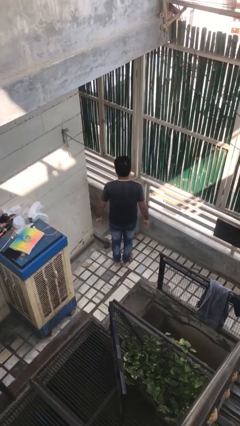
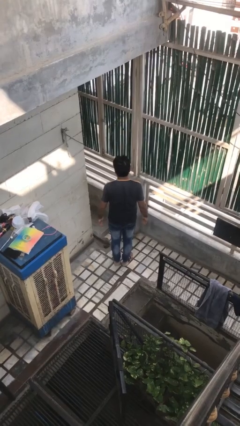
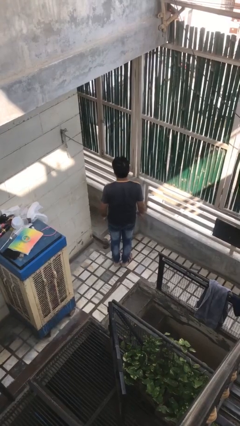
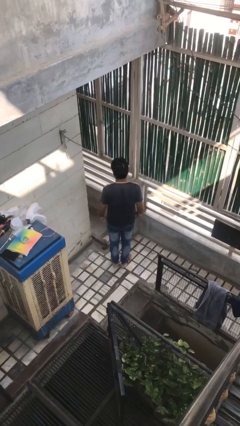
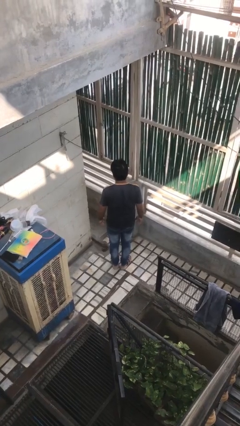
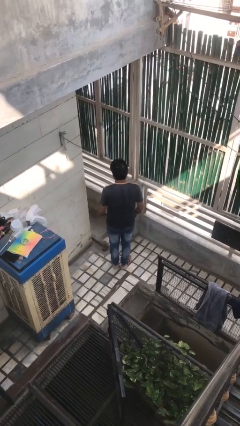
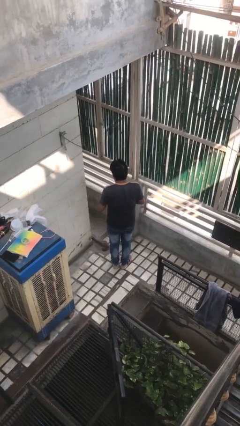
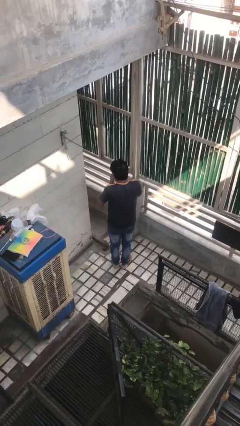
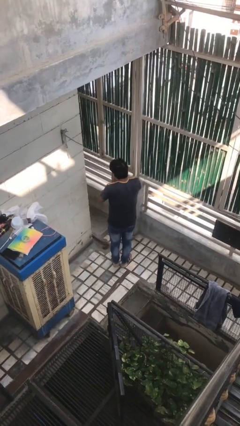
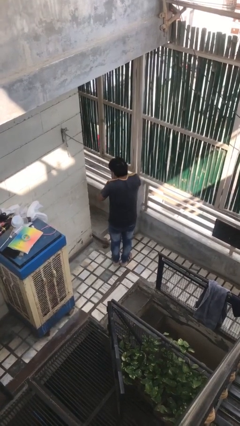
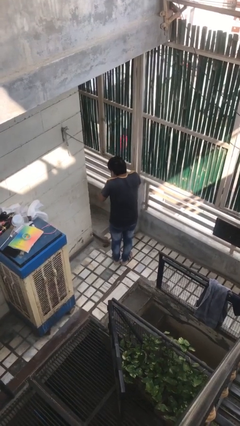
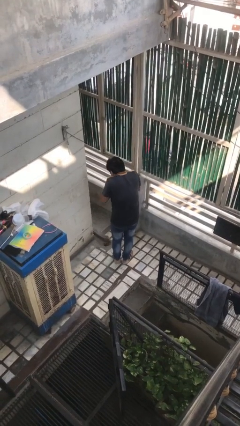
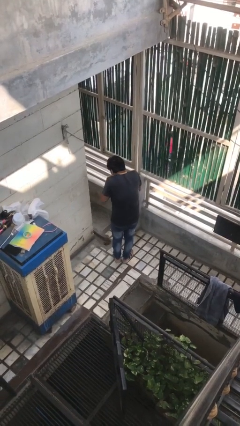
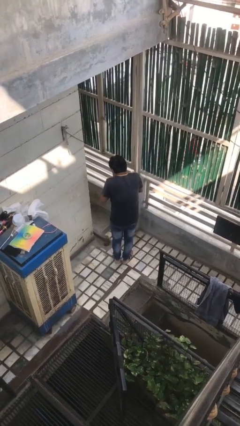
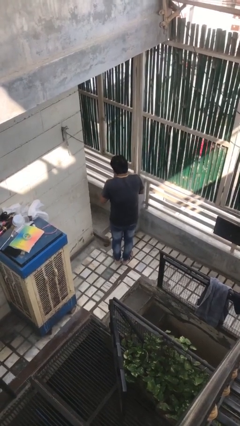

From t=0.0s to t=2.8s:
person sneezes into hand

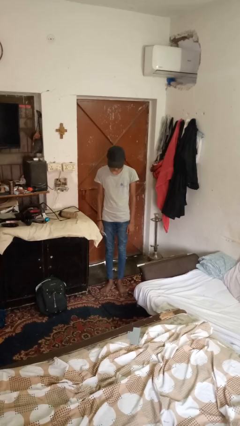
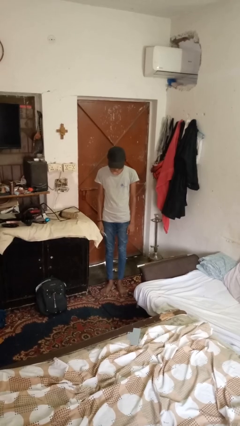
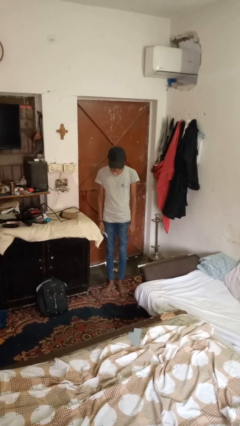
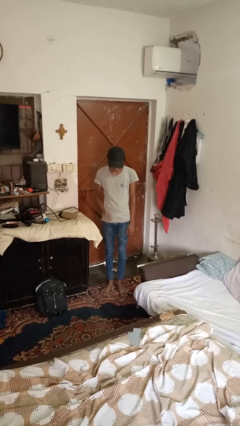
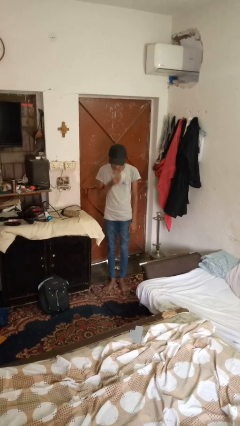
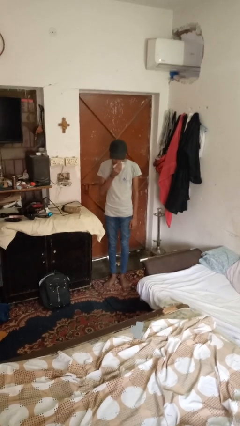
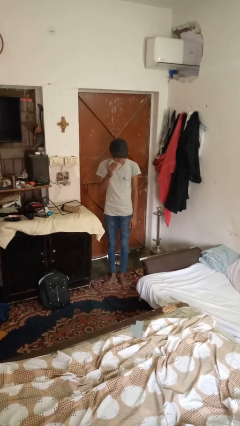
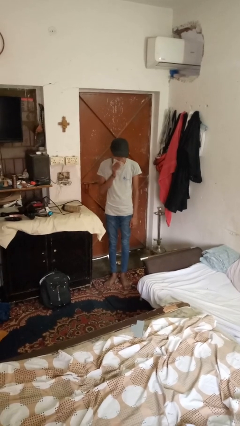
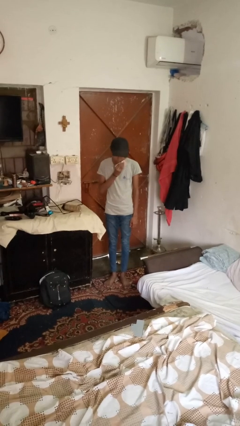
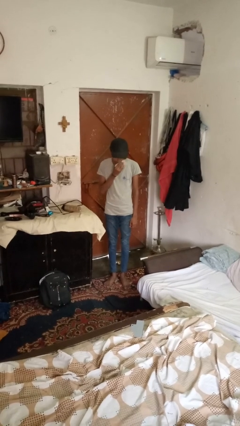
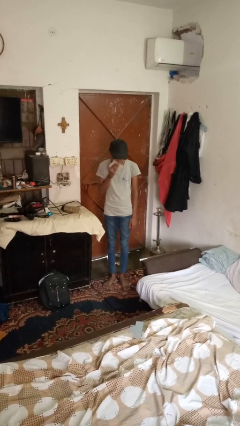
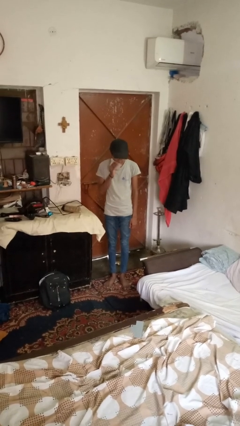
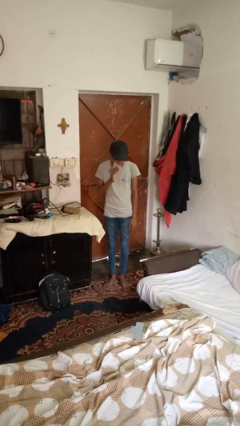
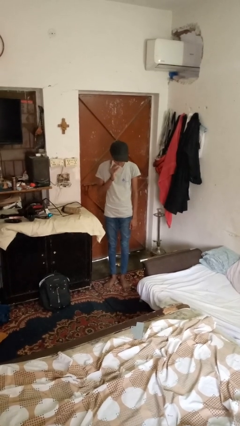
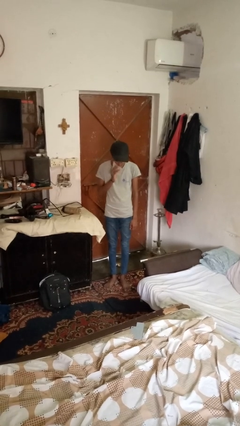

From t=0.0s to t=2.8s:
person wipes mouth with napkin

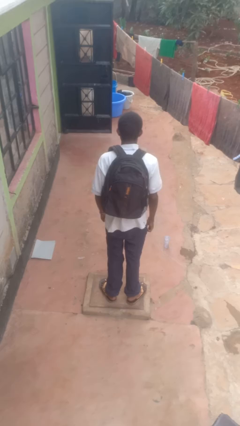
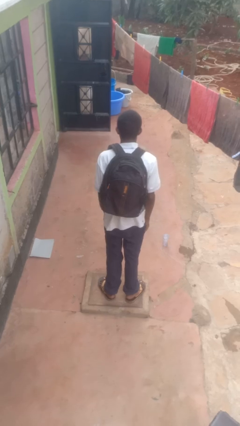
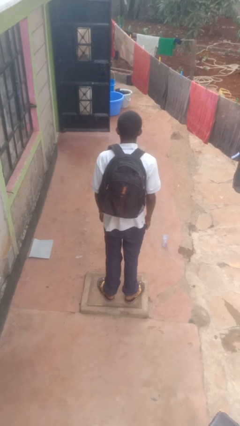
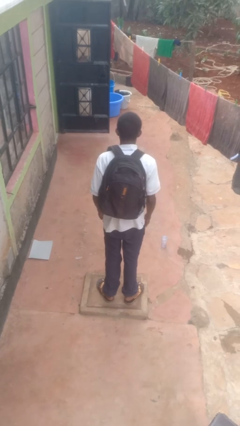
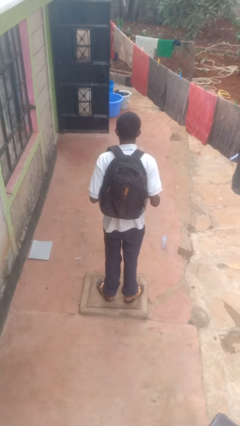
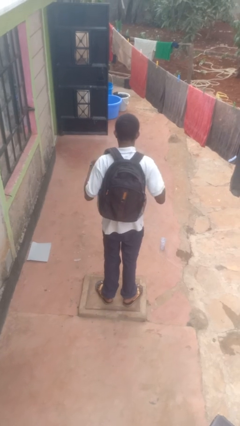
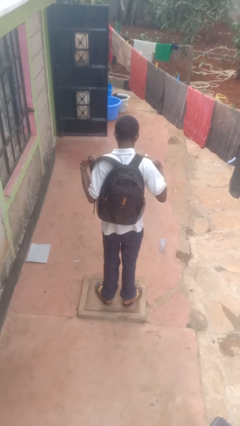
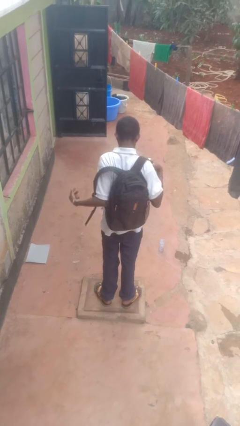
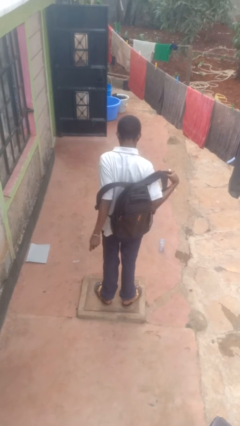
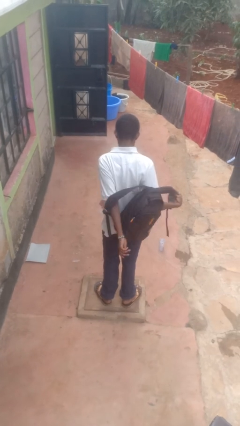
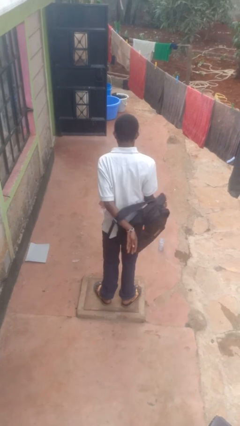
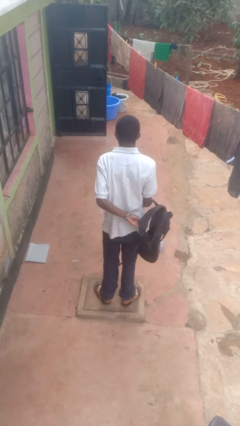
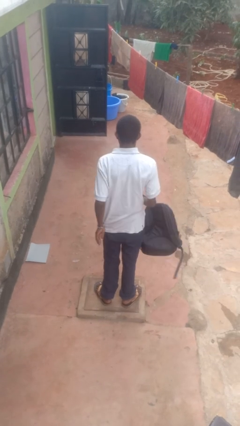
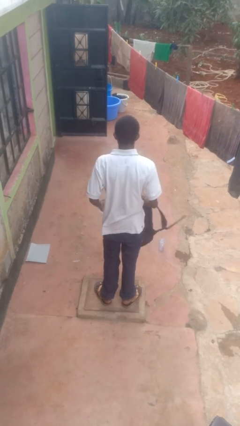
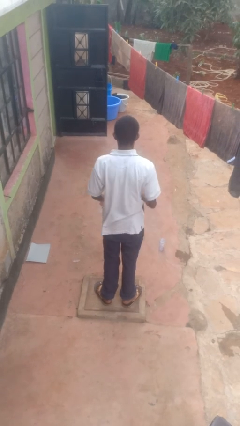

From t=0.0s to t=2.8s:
person takes off backpack

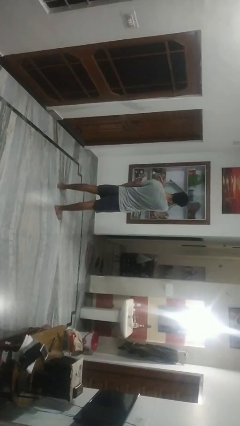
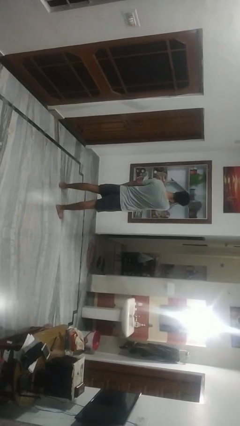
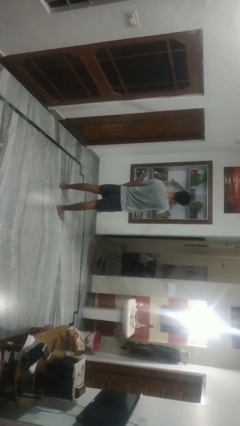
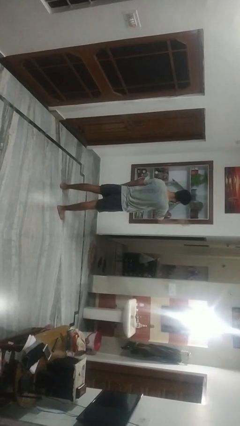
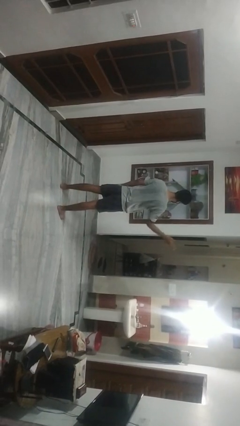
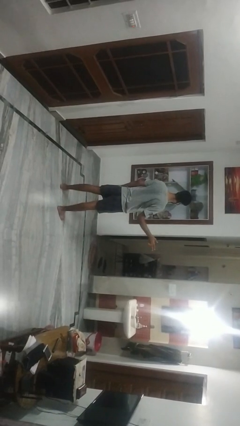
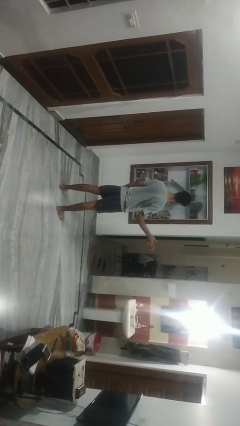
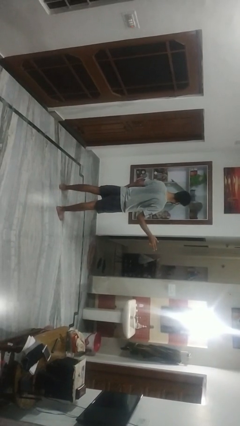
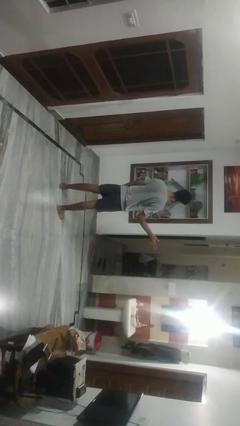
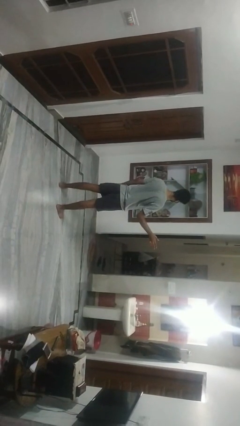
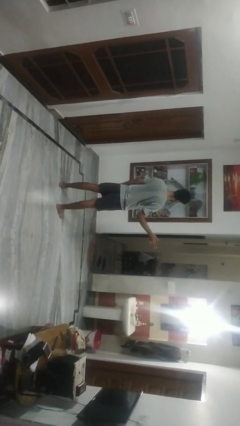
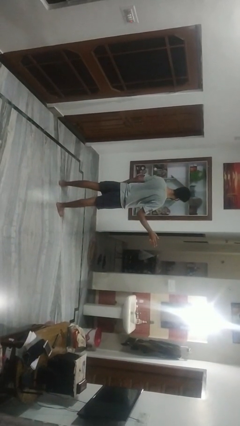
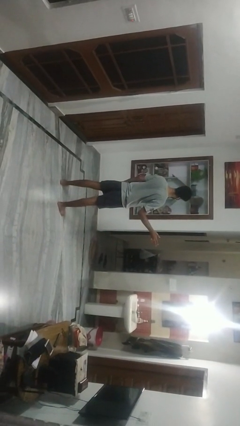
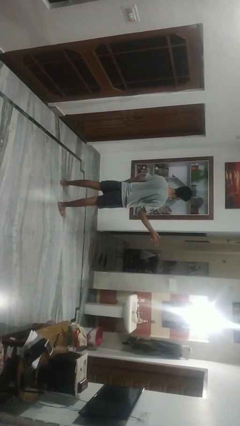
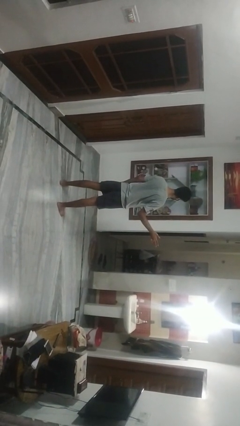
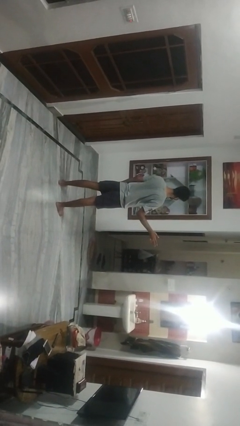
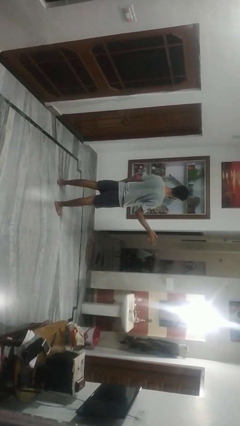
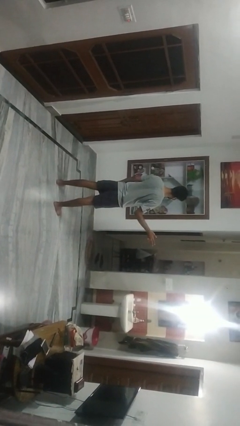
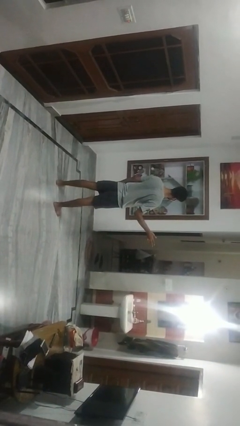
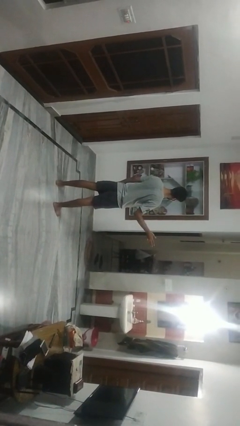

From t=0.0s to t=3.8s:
person gestures swipe right

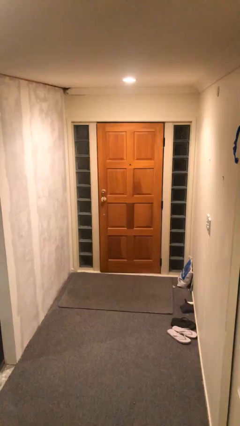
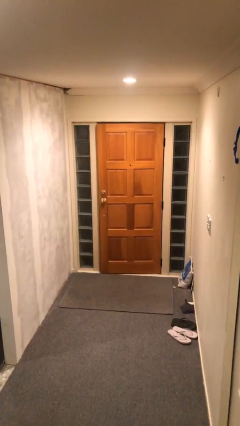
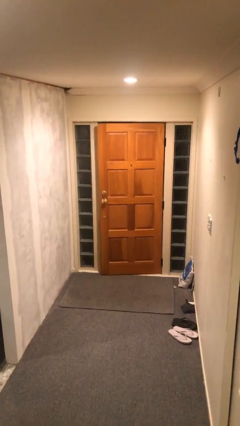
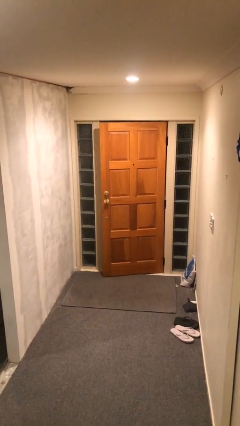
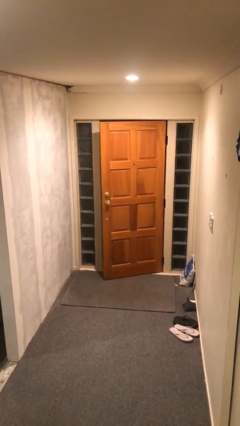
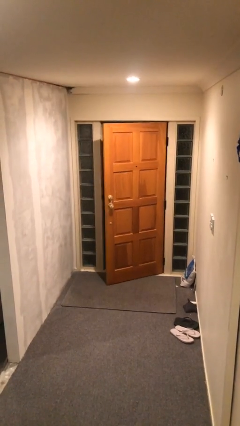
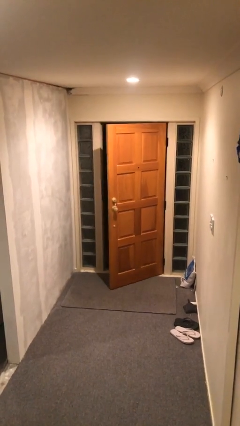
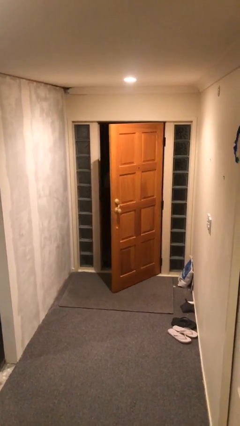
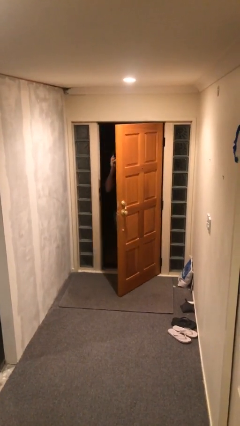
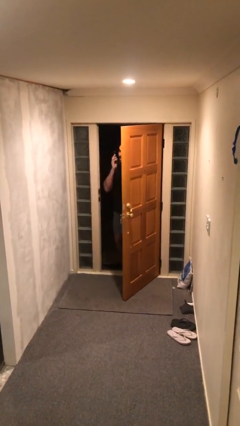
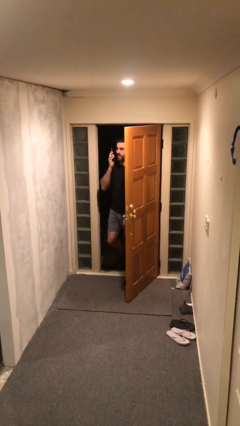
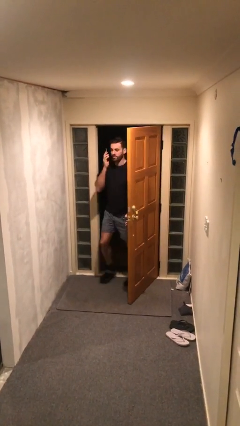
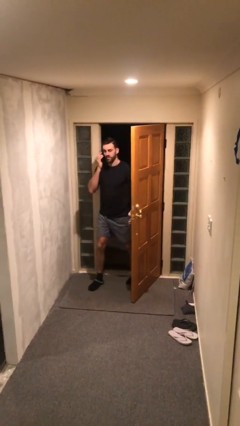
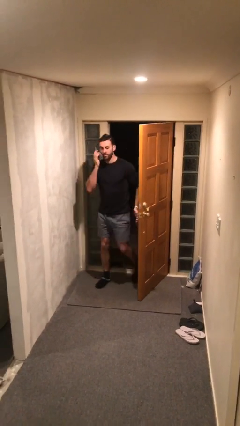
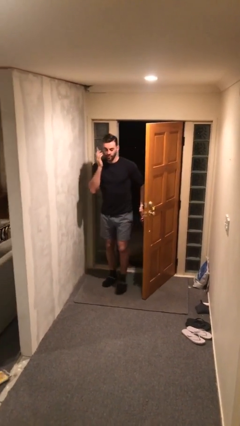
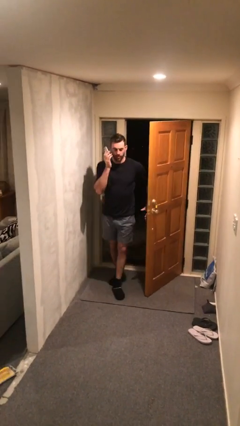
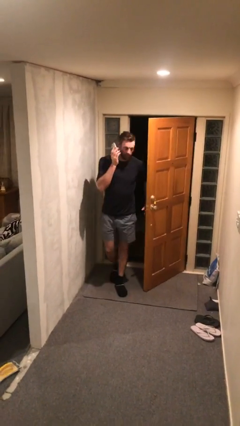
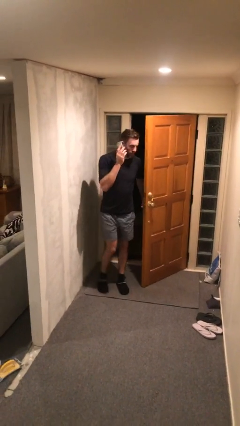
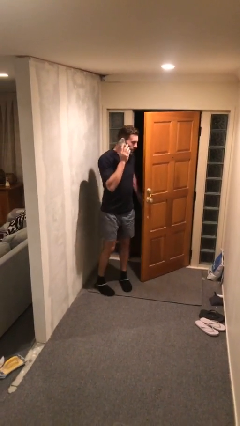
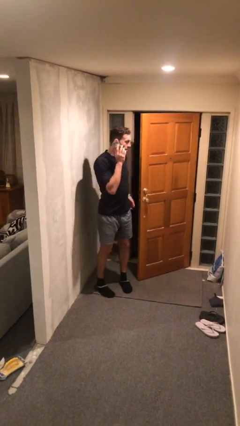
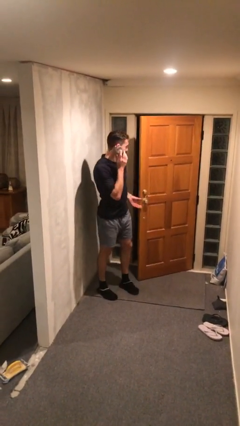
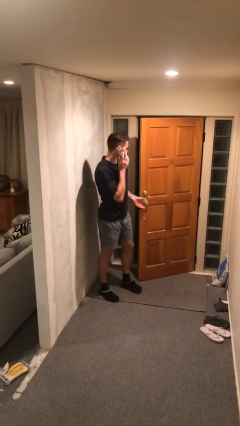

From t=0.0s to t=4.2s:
person enters scene through structure

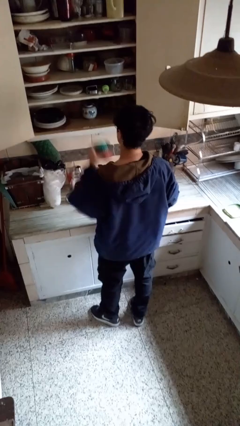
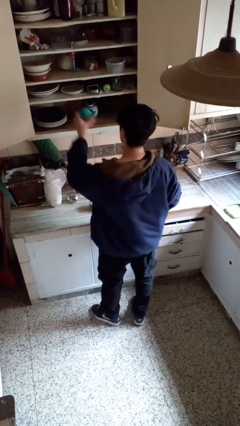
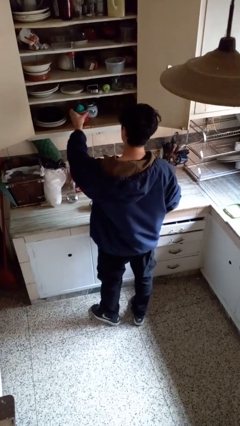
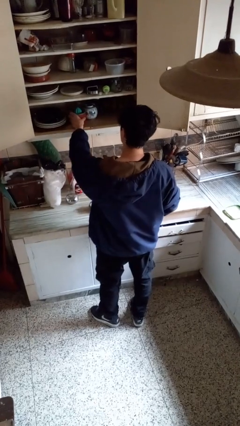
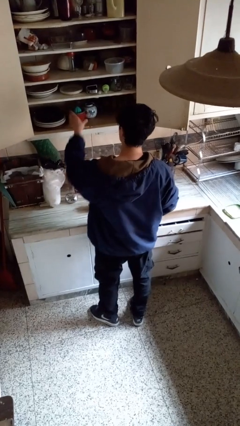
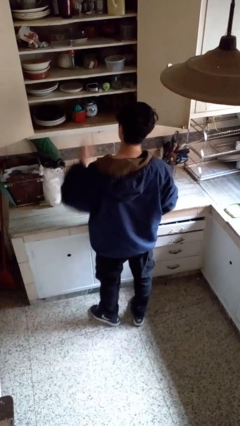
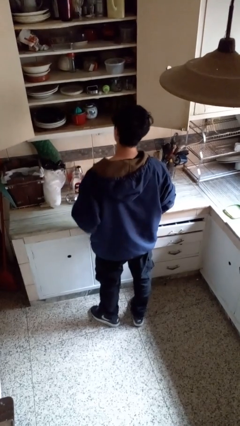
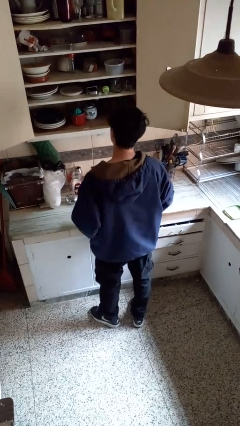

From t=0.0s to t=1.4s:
person puts object in cabinet
